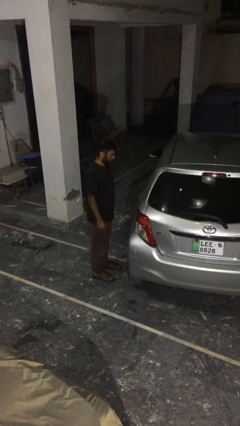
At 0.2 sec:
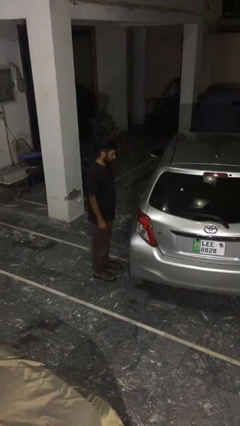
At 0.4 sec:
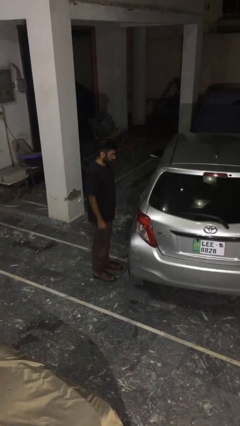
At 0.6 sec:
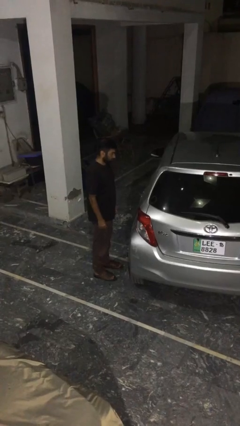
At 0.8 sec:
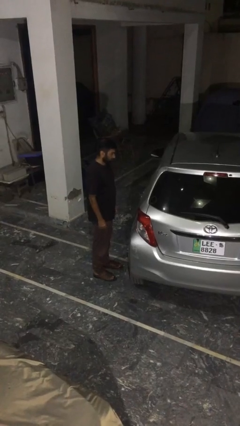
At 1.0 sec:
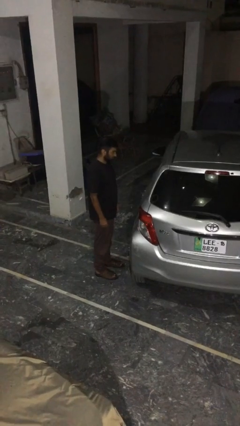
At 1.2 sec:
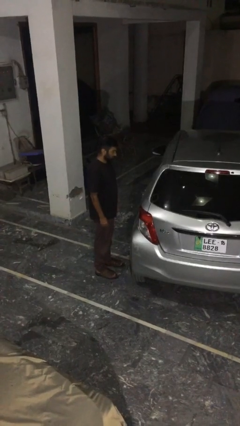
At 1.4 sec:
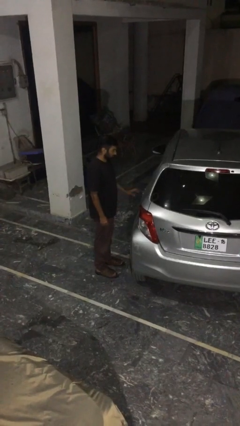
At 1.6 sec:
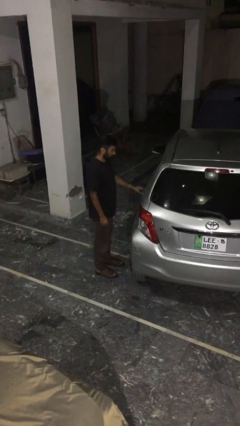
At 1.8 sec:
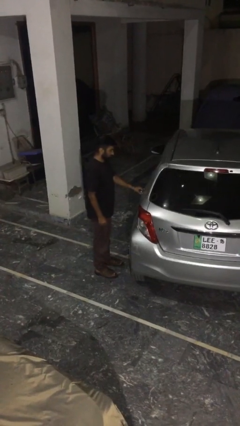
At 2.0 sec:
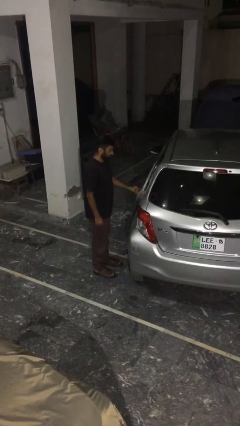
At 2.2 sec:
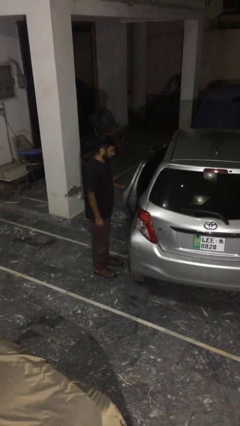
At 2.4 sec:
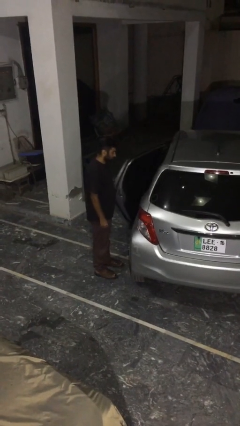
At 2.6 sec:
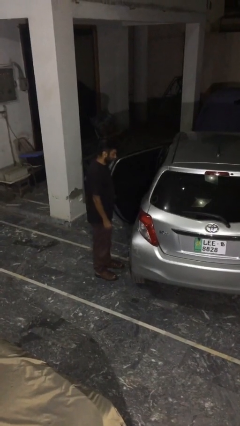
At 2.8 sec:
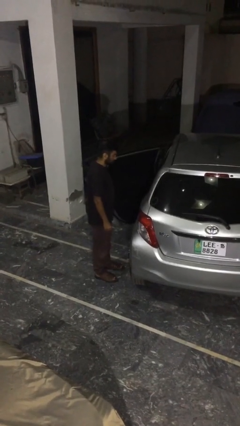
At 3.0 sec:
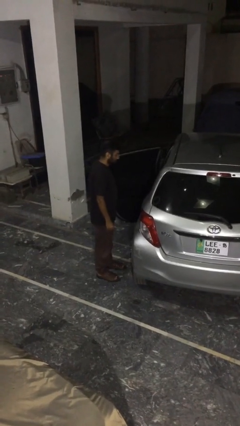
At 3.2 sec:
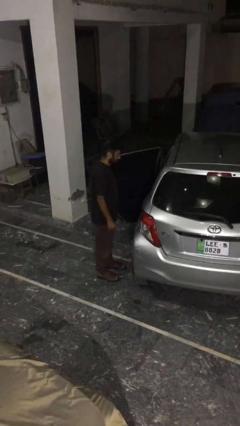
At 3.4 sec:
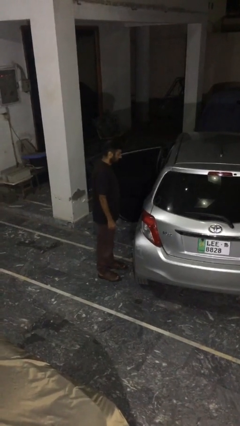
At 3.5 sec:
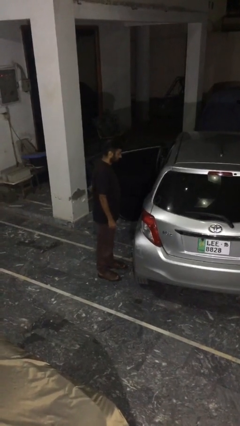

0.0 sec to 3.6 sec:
person opens car door

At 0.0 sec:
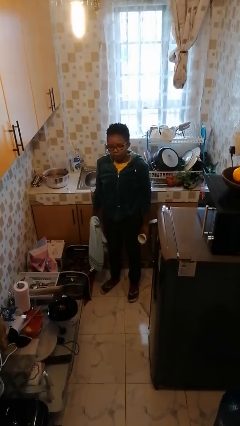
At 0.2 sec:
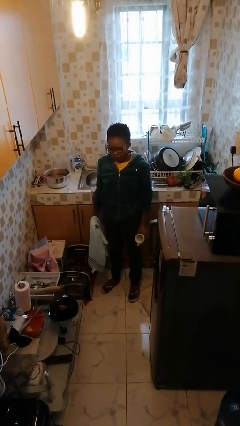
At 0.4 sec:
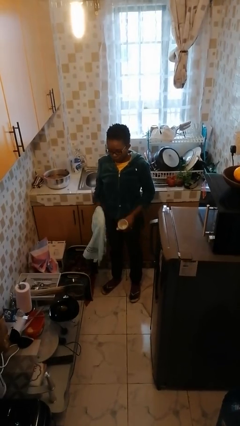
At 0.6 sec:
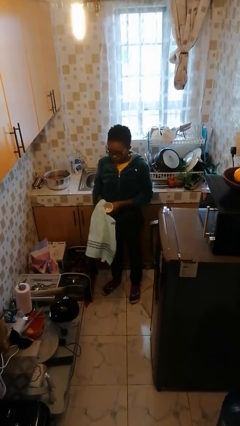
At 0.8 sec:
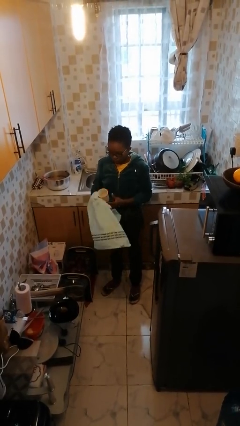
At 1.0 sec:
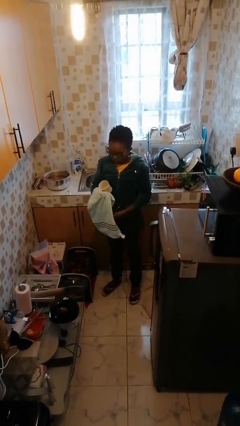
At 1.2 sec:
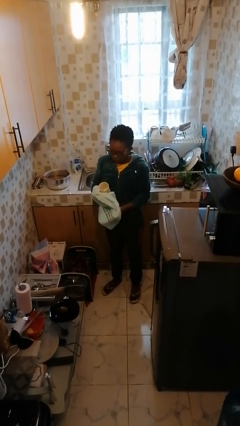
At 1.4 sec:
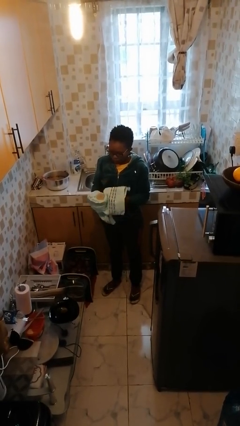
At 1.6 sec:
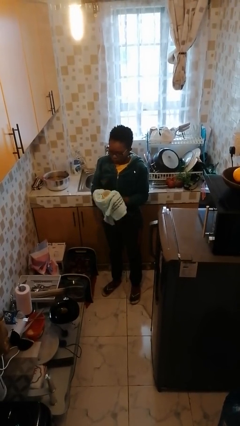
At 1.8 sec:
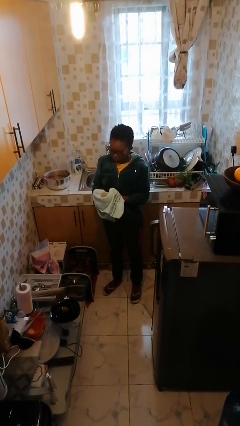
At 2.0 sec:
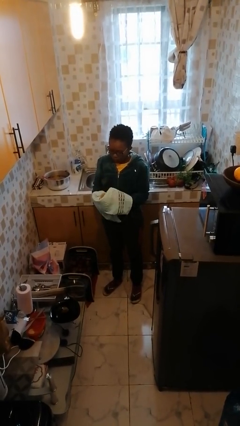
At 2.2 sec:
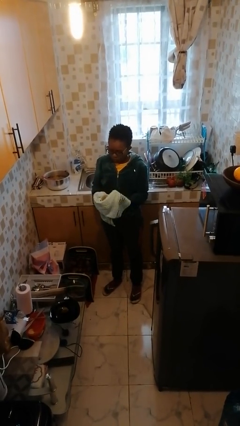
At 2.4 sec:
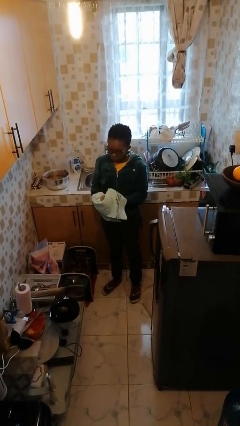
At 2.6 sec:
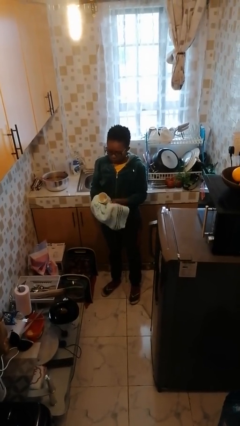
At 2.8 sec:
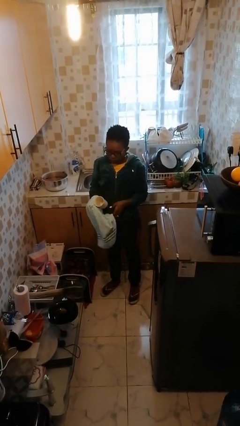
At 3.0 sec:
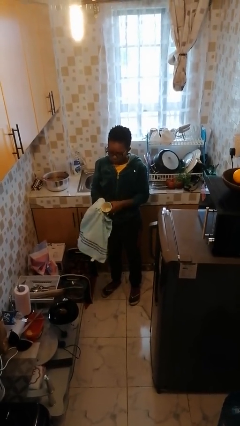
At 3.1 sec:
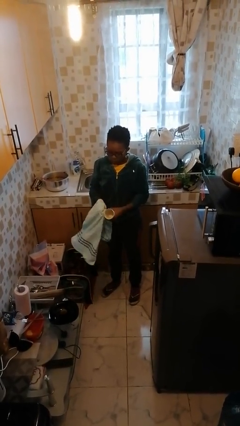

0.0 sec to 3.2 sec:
person dries dish

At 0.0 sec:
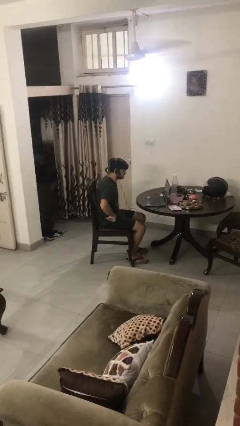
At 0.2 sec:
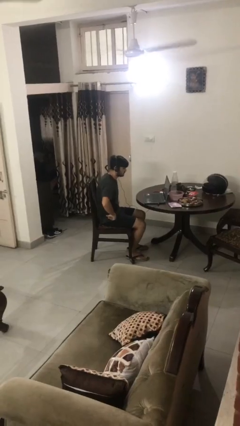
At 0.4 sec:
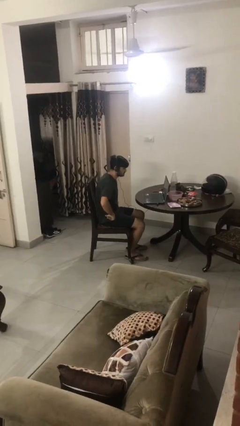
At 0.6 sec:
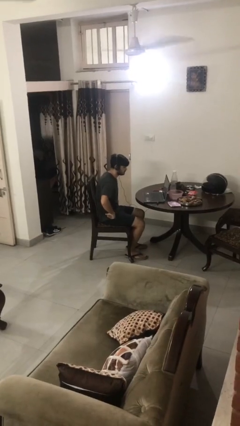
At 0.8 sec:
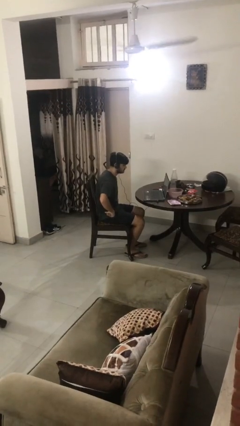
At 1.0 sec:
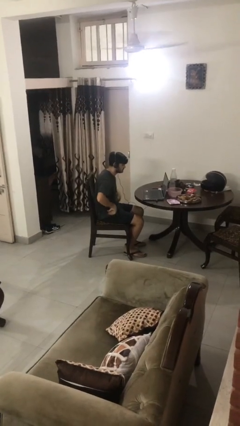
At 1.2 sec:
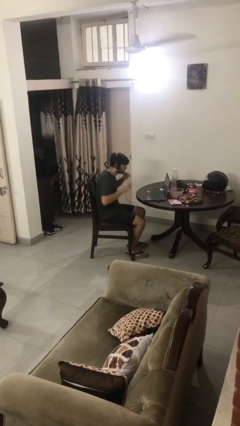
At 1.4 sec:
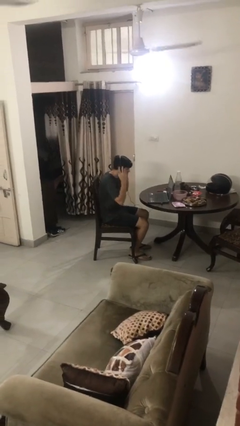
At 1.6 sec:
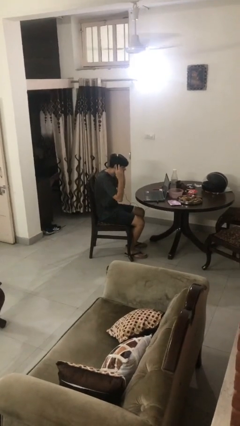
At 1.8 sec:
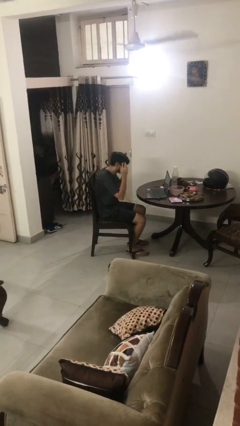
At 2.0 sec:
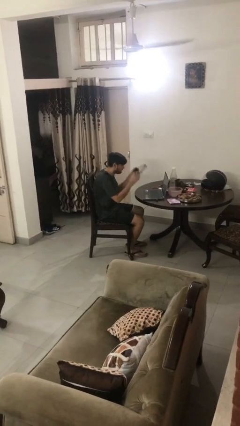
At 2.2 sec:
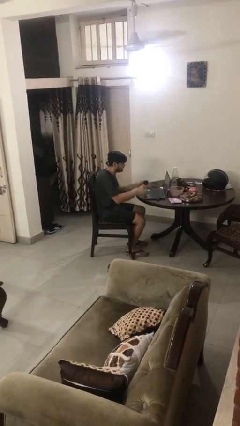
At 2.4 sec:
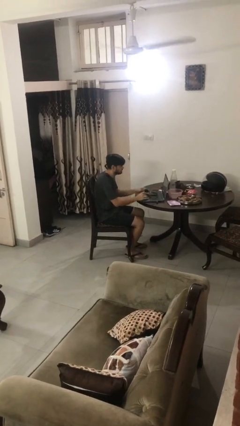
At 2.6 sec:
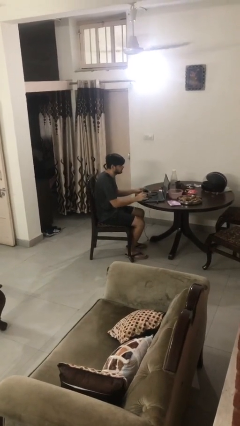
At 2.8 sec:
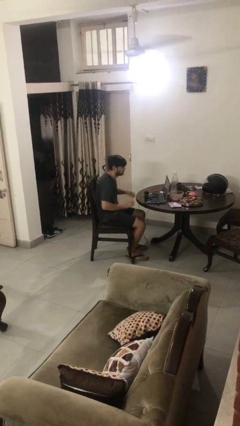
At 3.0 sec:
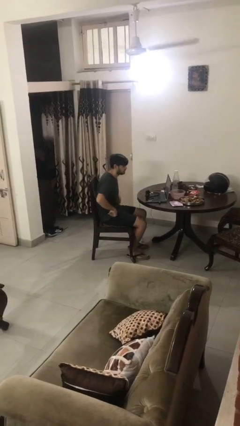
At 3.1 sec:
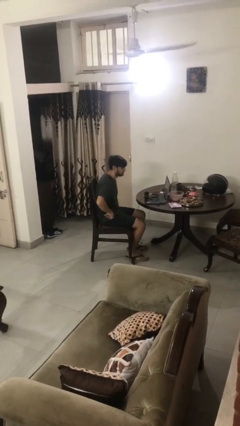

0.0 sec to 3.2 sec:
person takes off headphones

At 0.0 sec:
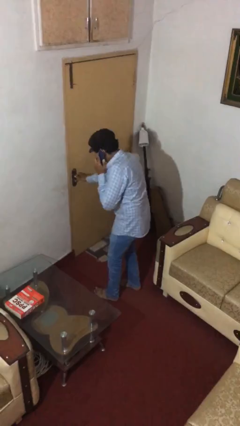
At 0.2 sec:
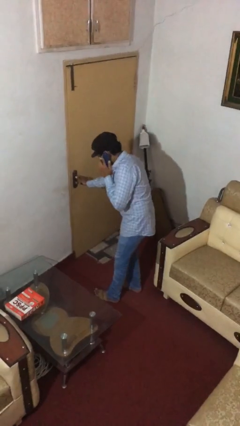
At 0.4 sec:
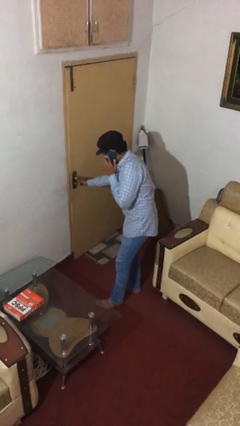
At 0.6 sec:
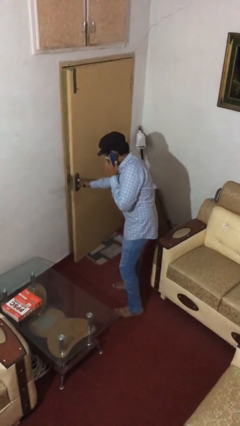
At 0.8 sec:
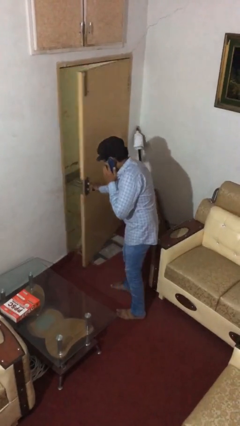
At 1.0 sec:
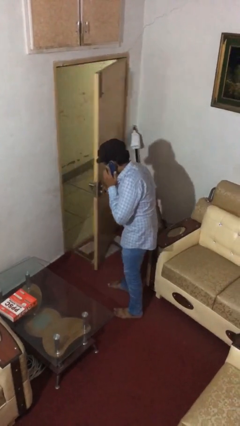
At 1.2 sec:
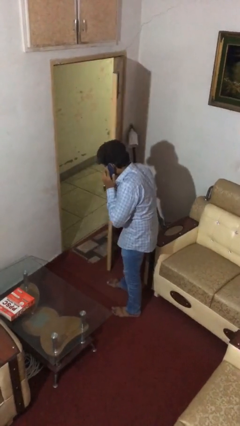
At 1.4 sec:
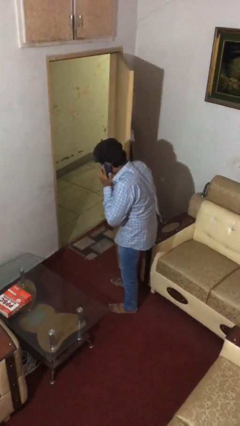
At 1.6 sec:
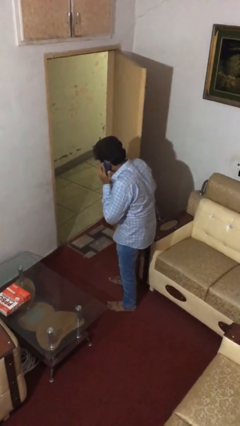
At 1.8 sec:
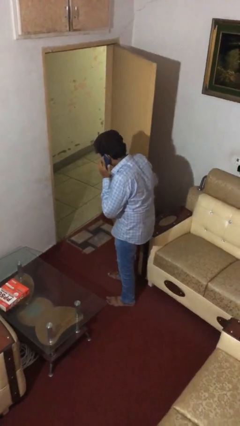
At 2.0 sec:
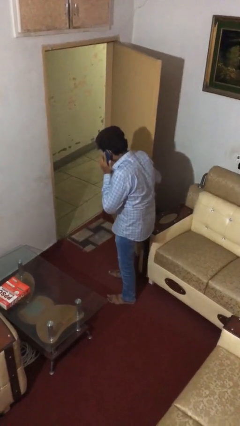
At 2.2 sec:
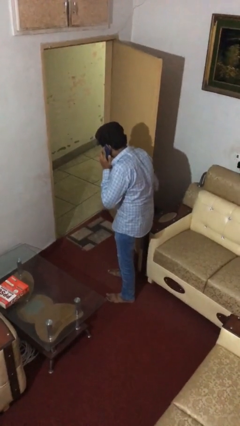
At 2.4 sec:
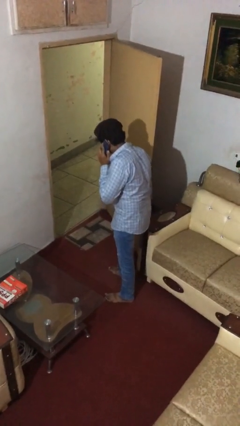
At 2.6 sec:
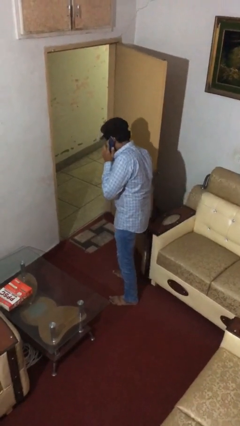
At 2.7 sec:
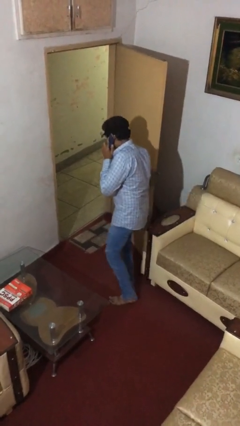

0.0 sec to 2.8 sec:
person opens facility door

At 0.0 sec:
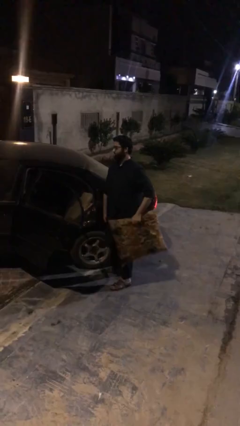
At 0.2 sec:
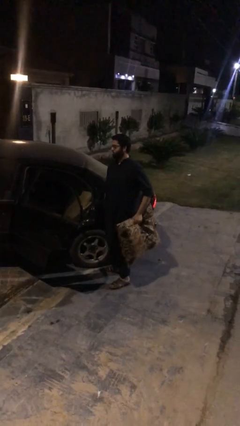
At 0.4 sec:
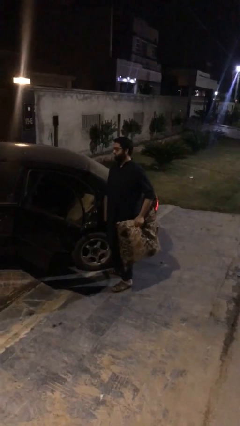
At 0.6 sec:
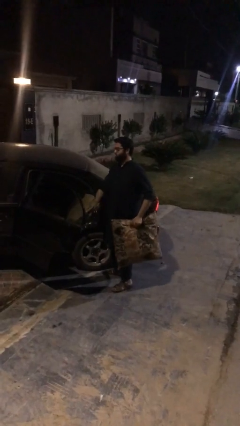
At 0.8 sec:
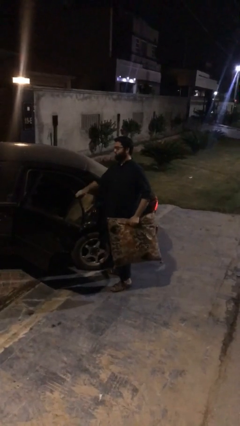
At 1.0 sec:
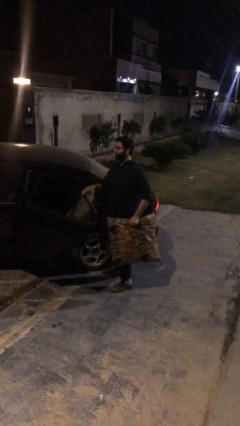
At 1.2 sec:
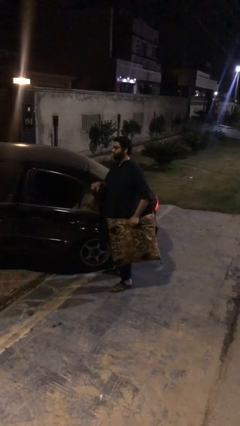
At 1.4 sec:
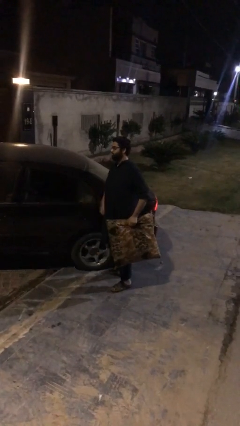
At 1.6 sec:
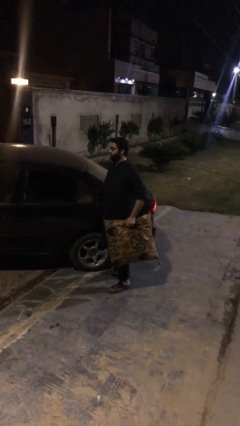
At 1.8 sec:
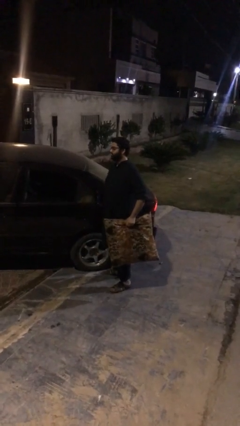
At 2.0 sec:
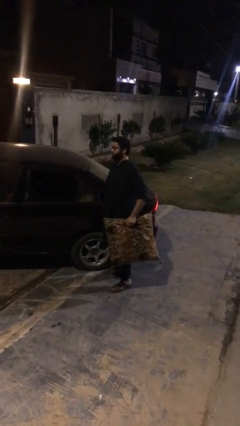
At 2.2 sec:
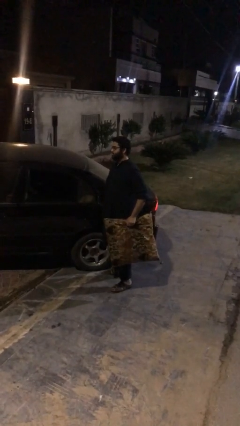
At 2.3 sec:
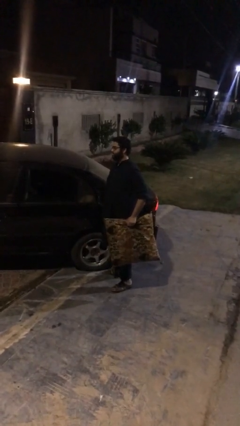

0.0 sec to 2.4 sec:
person closes car door

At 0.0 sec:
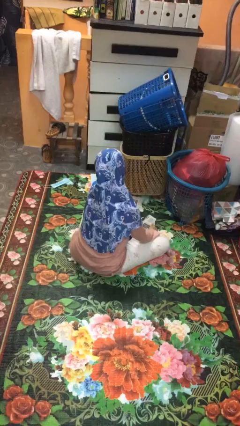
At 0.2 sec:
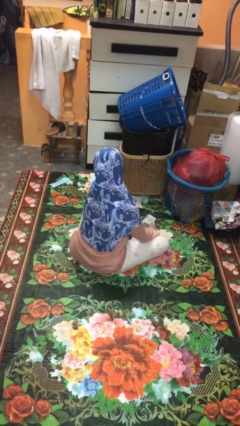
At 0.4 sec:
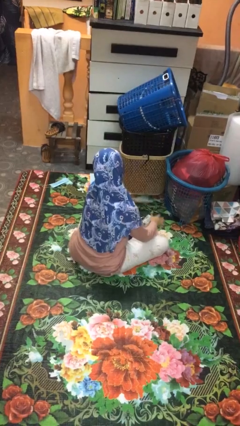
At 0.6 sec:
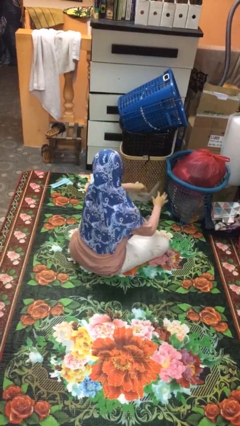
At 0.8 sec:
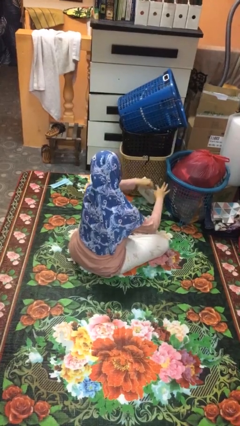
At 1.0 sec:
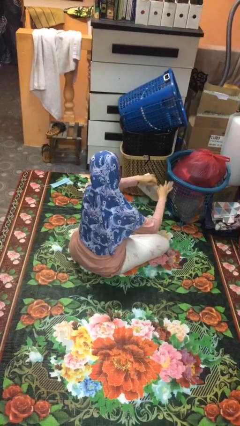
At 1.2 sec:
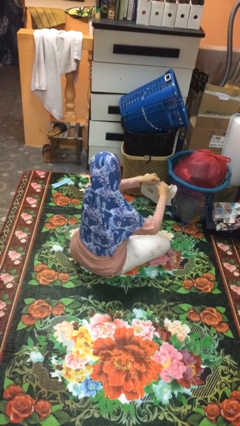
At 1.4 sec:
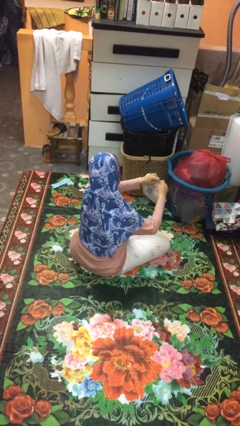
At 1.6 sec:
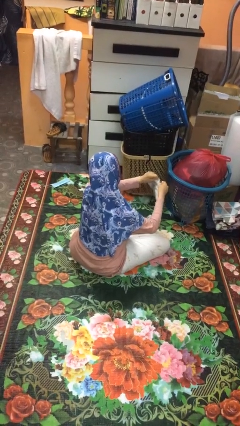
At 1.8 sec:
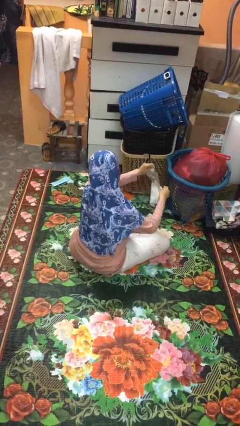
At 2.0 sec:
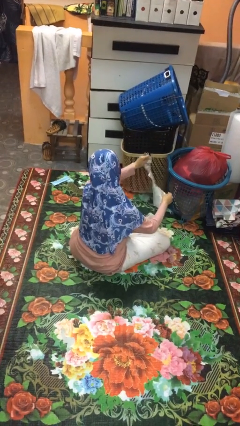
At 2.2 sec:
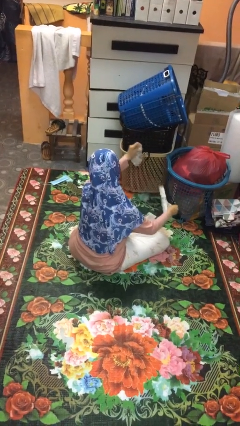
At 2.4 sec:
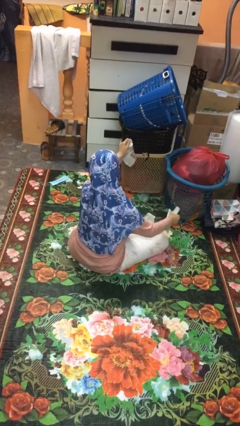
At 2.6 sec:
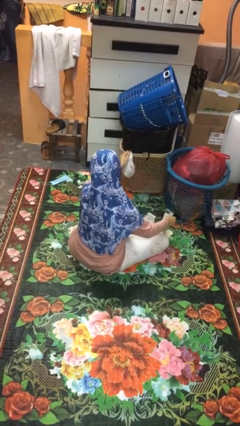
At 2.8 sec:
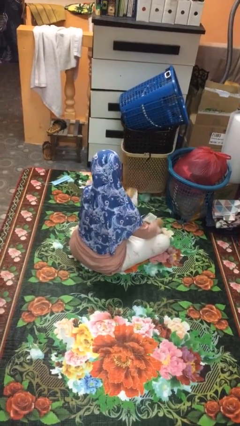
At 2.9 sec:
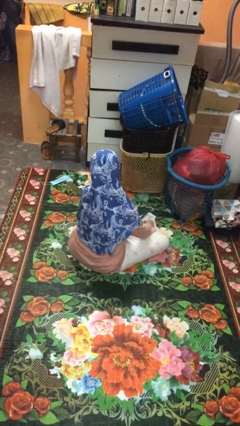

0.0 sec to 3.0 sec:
person tears paper
